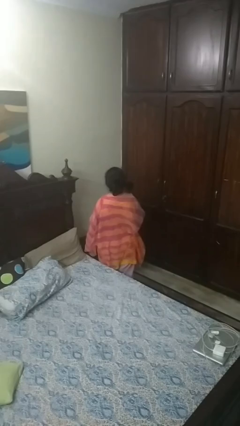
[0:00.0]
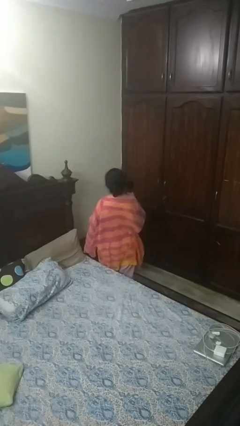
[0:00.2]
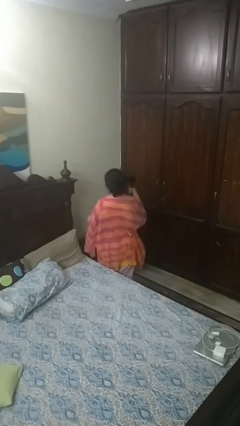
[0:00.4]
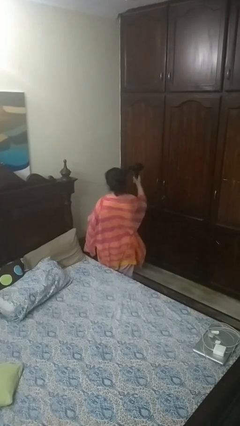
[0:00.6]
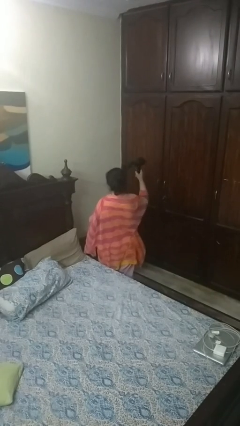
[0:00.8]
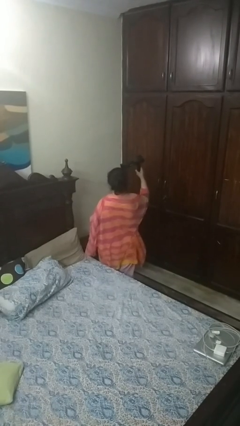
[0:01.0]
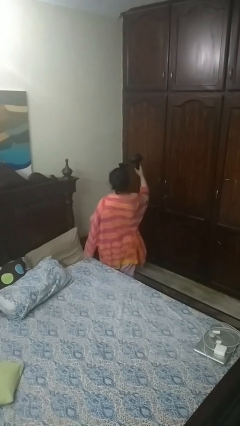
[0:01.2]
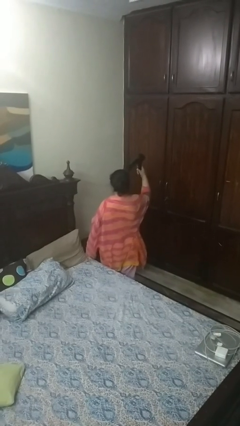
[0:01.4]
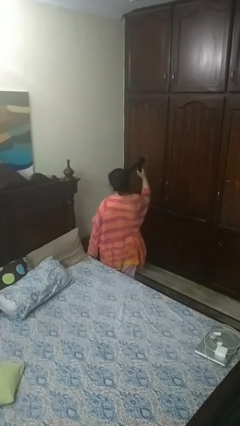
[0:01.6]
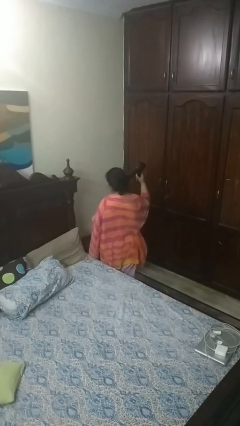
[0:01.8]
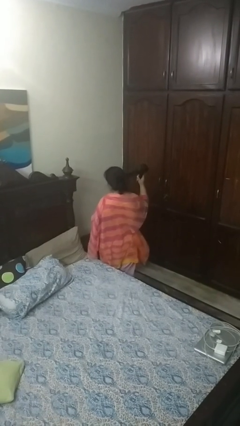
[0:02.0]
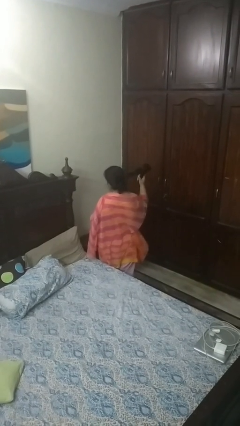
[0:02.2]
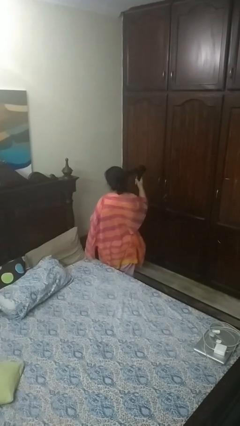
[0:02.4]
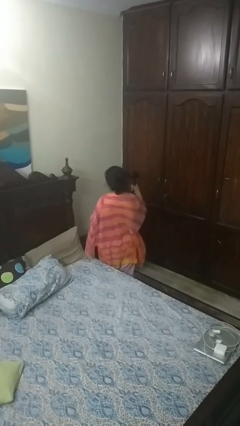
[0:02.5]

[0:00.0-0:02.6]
person dries hair with hairdryer

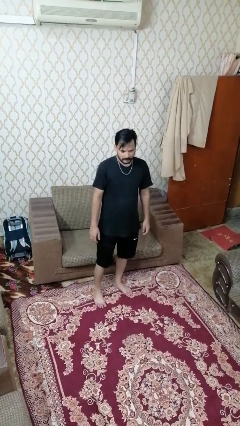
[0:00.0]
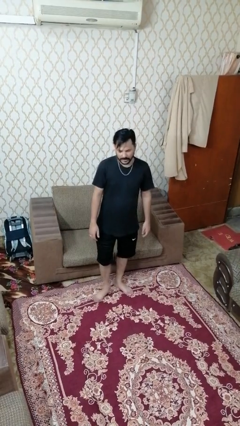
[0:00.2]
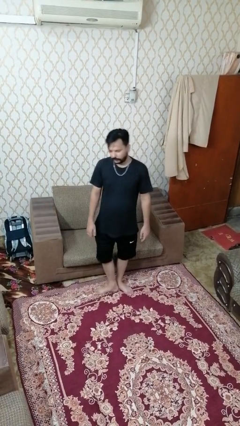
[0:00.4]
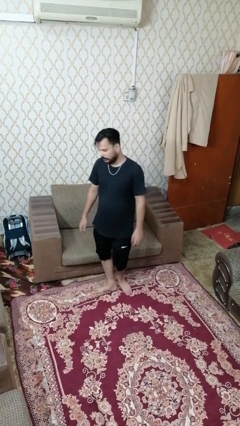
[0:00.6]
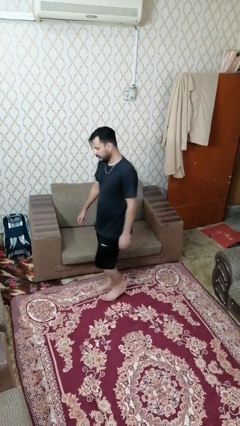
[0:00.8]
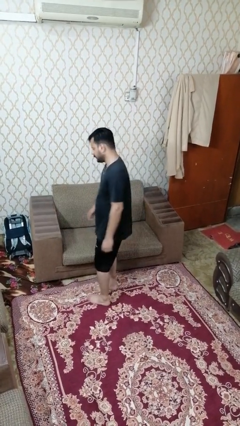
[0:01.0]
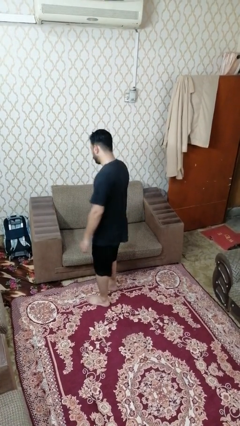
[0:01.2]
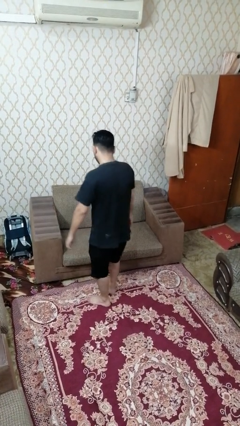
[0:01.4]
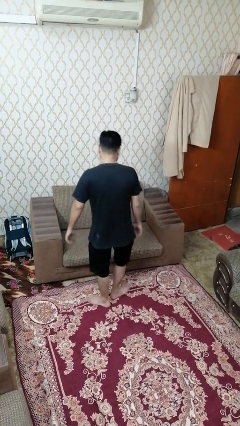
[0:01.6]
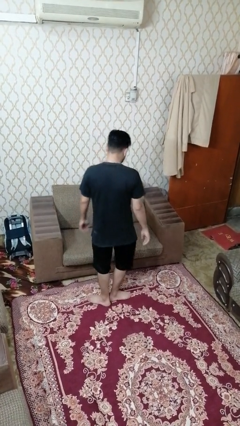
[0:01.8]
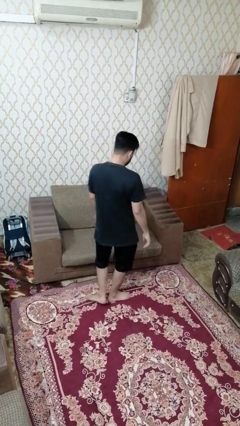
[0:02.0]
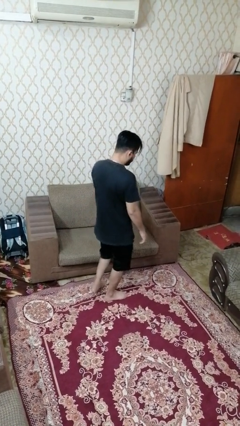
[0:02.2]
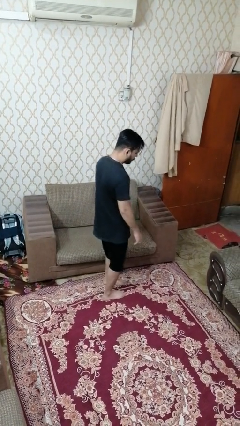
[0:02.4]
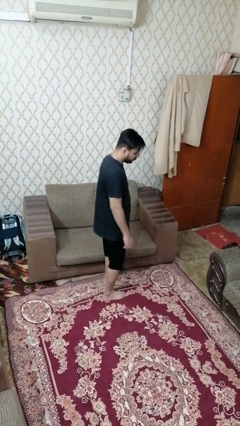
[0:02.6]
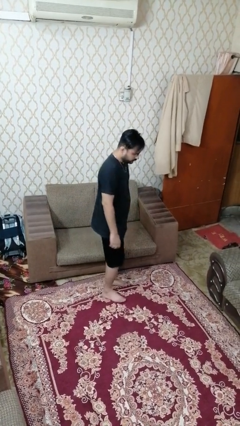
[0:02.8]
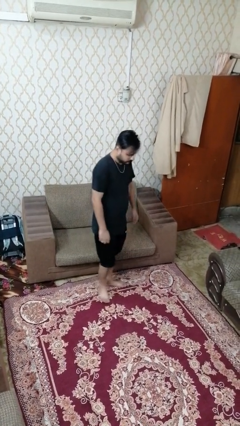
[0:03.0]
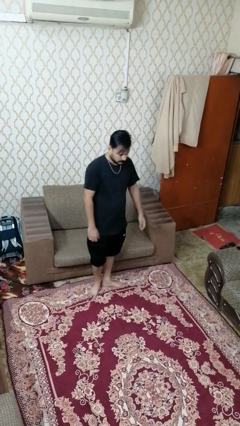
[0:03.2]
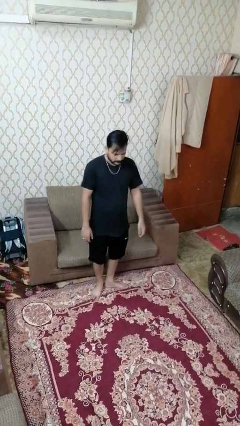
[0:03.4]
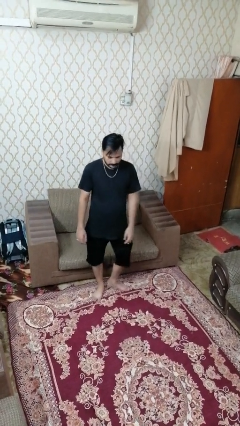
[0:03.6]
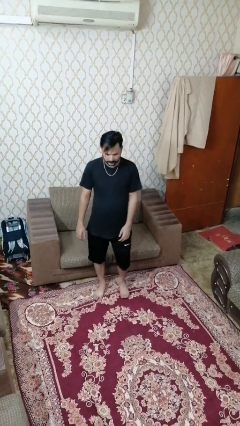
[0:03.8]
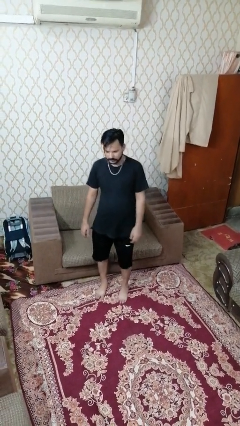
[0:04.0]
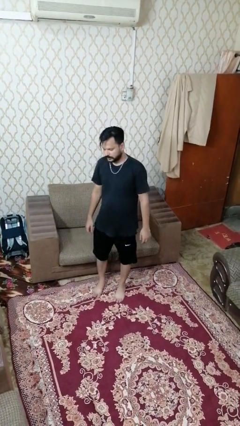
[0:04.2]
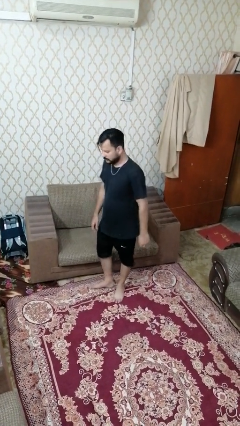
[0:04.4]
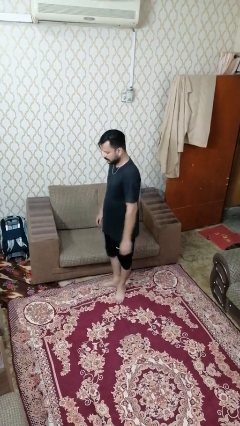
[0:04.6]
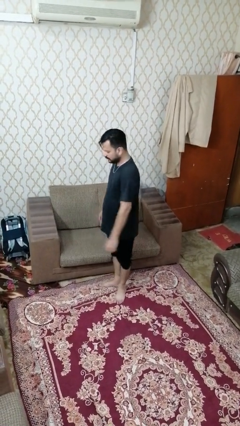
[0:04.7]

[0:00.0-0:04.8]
person twirls

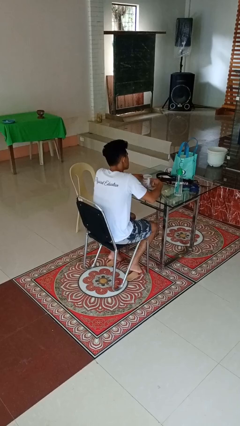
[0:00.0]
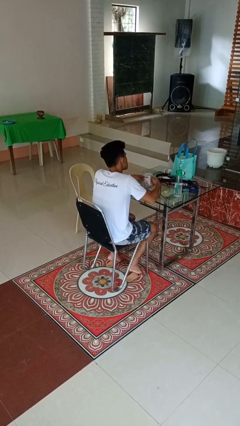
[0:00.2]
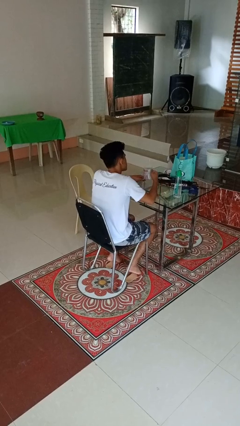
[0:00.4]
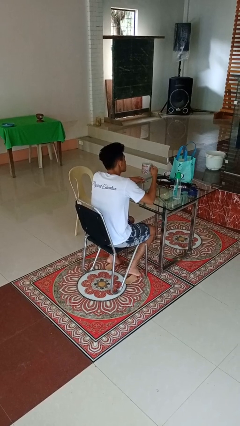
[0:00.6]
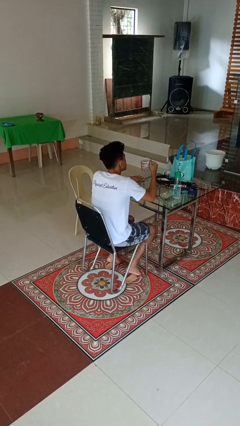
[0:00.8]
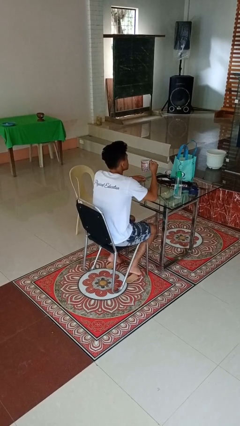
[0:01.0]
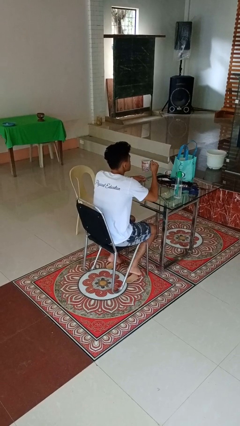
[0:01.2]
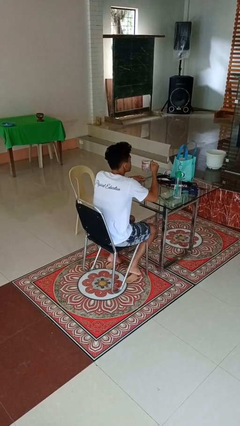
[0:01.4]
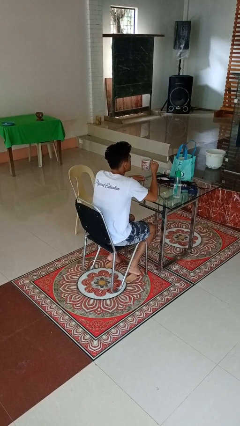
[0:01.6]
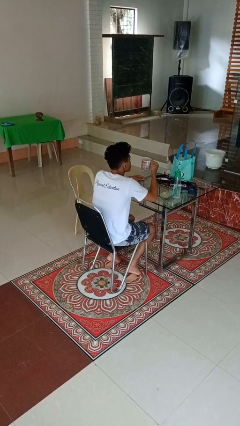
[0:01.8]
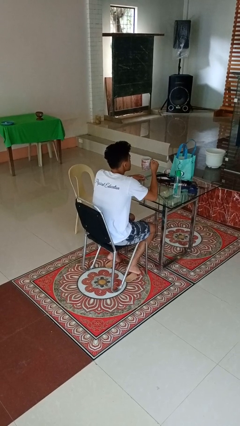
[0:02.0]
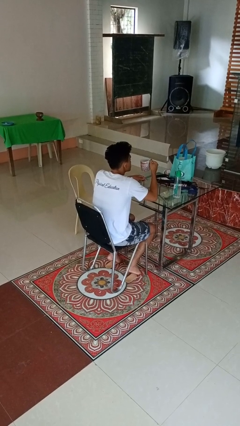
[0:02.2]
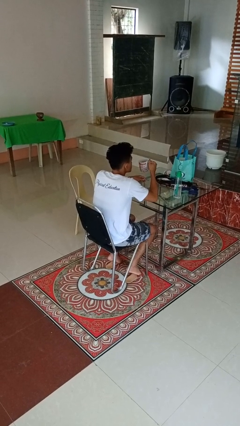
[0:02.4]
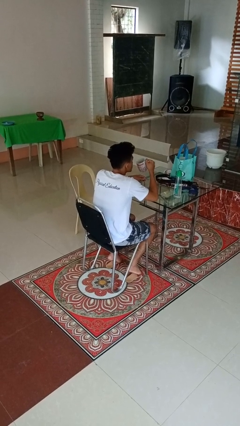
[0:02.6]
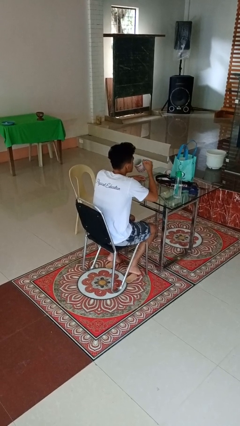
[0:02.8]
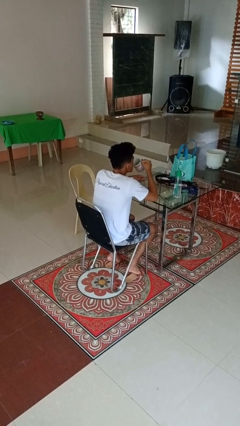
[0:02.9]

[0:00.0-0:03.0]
person picks up object from table

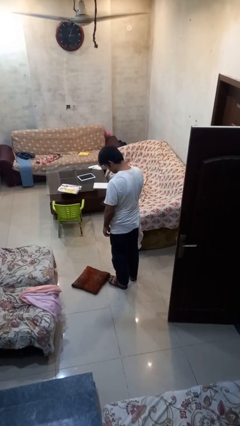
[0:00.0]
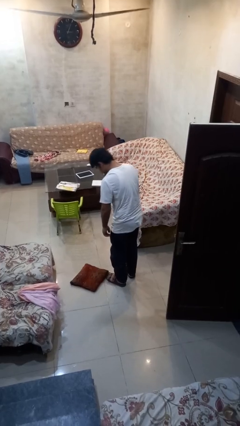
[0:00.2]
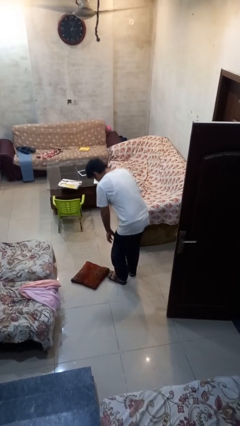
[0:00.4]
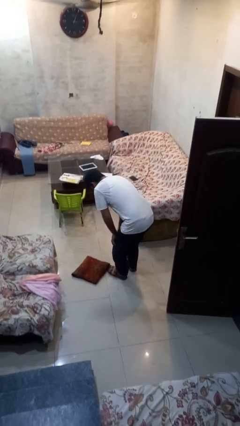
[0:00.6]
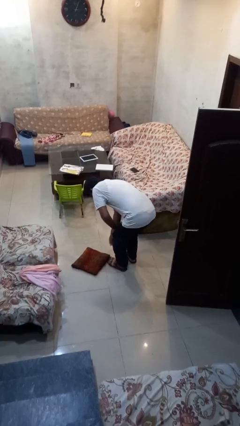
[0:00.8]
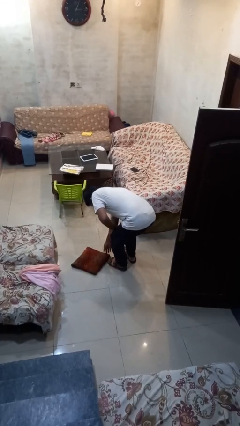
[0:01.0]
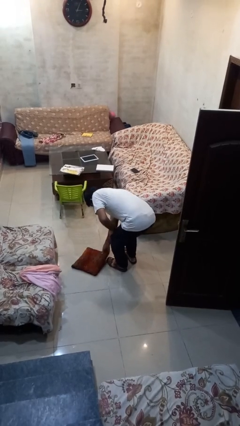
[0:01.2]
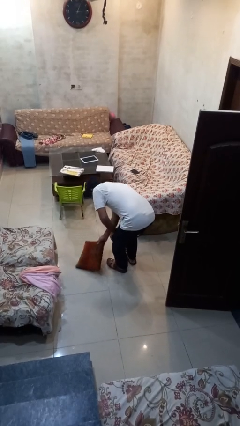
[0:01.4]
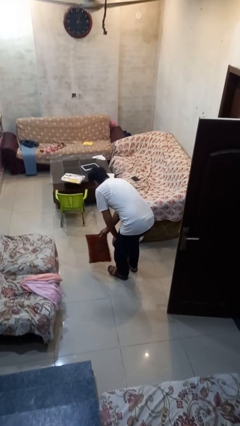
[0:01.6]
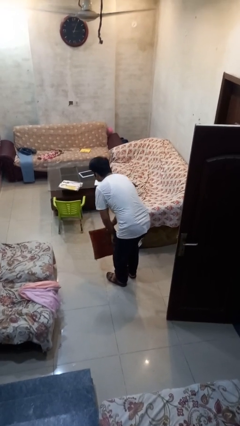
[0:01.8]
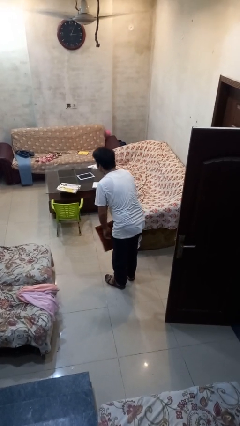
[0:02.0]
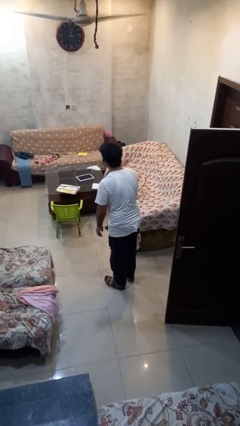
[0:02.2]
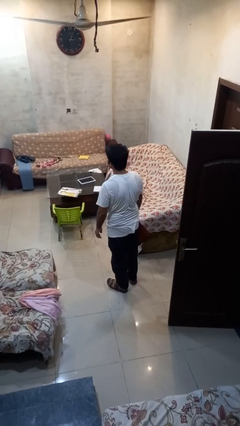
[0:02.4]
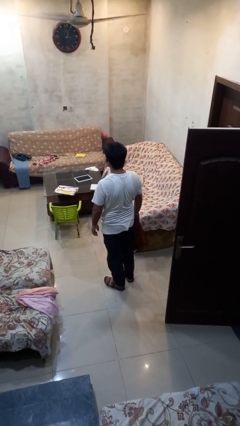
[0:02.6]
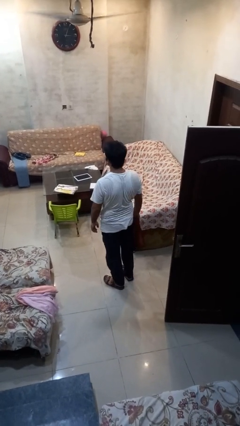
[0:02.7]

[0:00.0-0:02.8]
person picks up object from floor

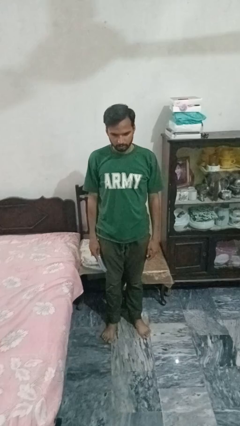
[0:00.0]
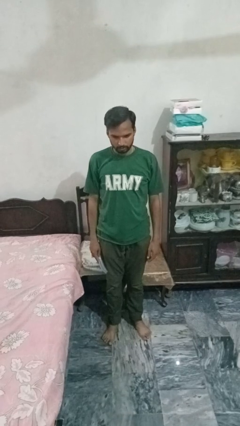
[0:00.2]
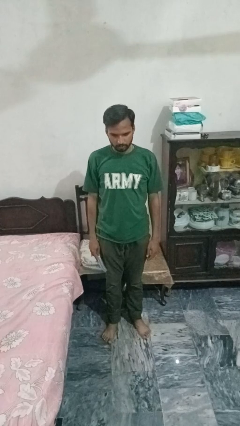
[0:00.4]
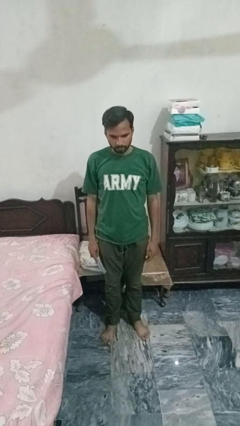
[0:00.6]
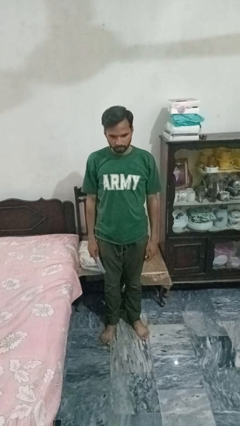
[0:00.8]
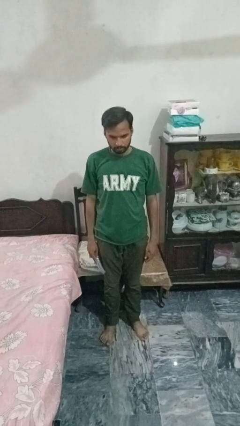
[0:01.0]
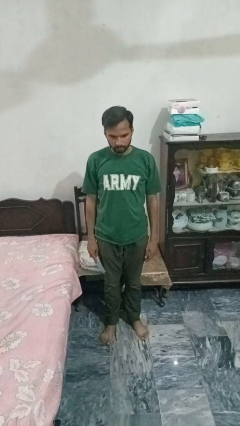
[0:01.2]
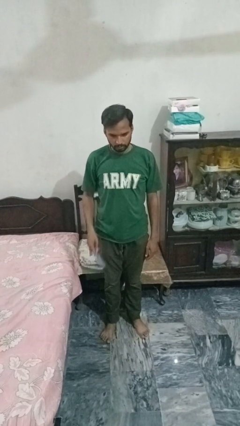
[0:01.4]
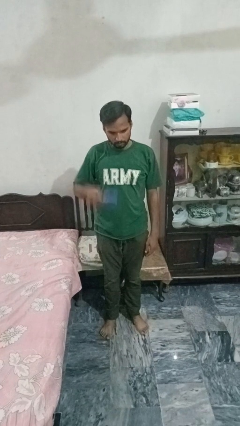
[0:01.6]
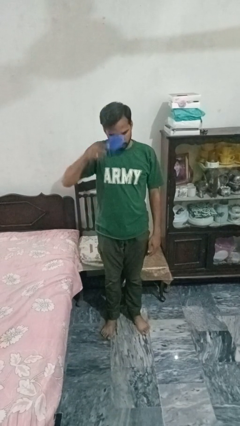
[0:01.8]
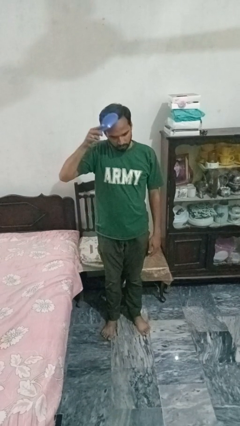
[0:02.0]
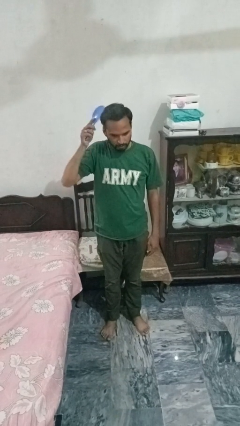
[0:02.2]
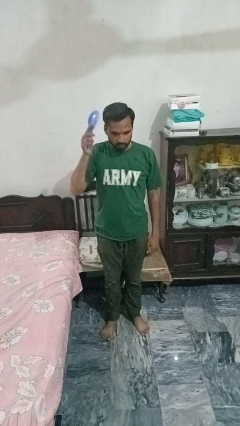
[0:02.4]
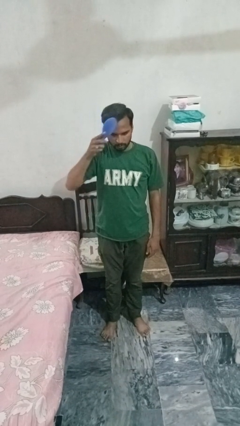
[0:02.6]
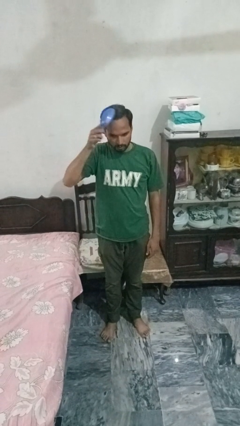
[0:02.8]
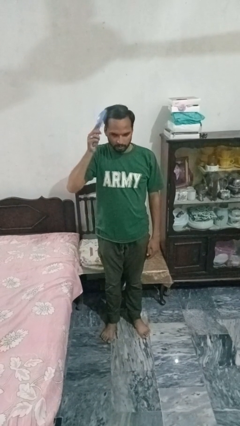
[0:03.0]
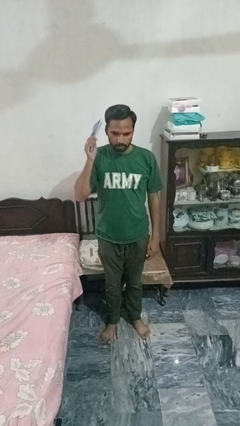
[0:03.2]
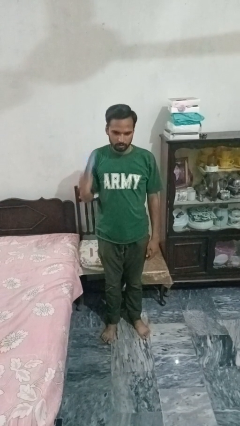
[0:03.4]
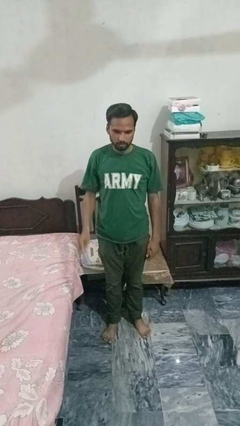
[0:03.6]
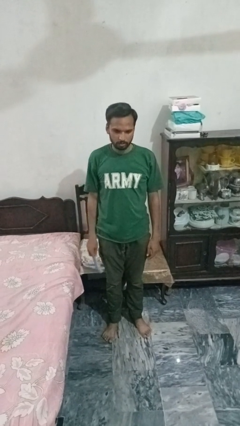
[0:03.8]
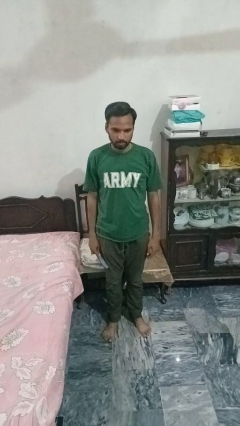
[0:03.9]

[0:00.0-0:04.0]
person brushes hair
